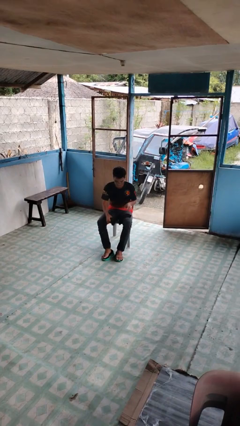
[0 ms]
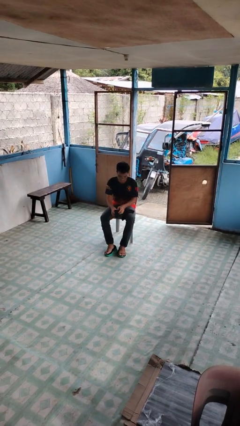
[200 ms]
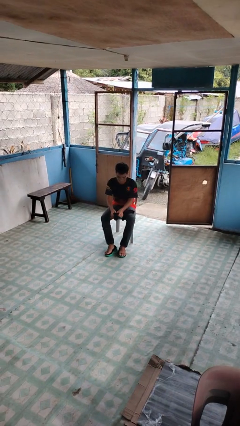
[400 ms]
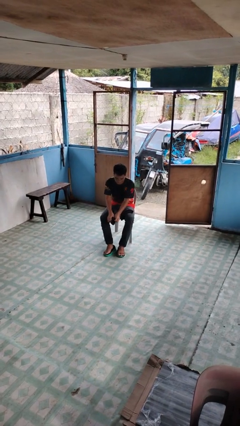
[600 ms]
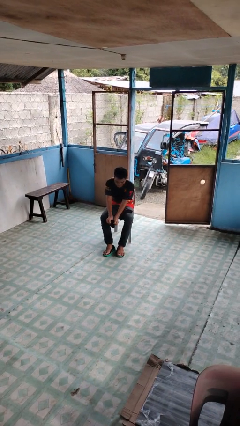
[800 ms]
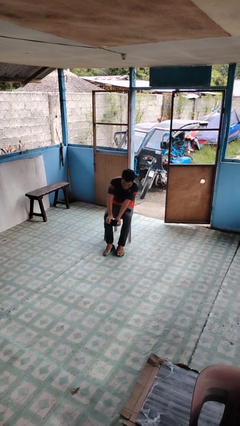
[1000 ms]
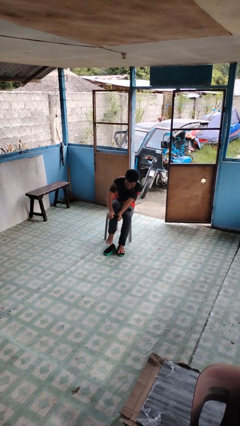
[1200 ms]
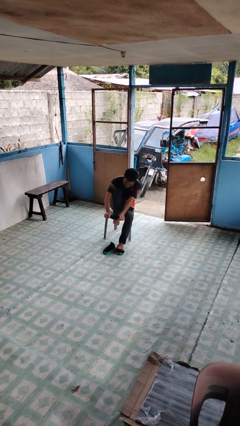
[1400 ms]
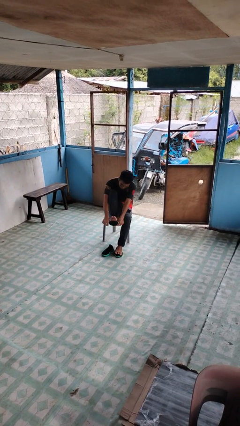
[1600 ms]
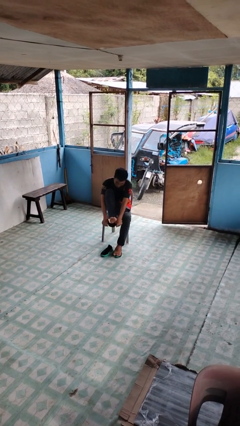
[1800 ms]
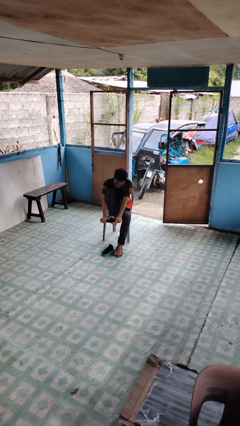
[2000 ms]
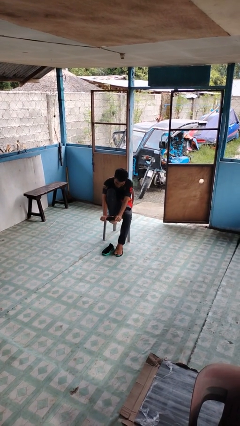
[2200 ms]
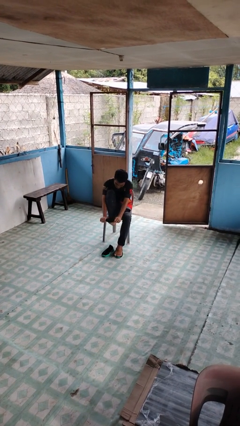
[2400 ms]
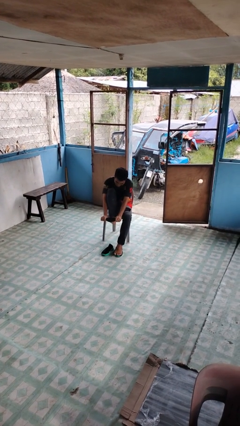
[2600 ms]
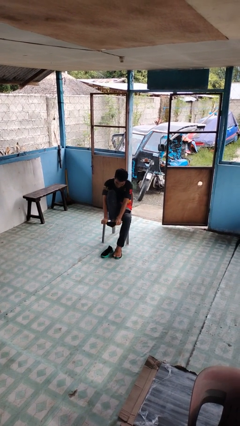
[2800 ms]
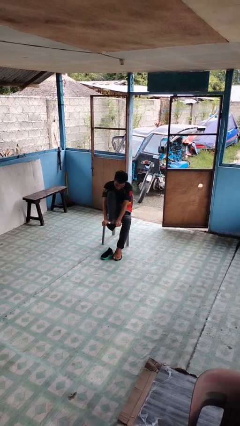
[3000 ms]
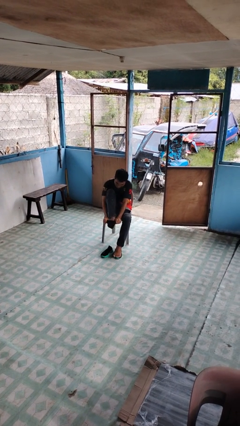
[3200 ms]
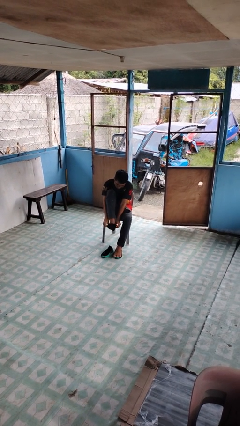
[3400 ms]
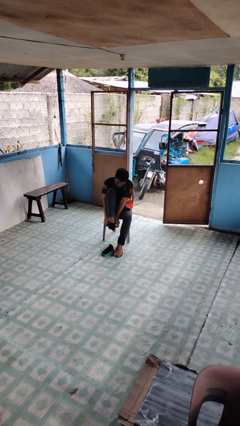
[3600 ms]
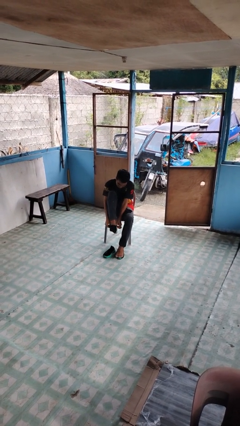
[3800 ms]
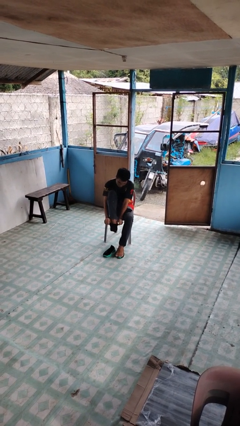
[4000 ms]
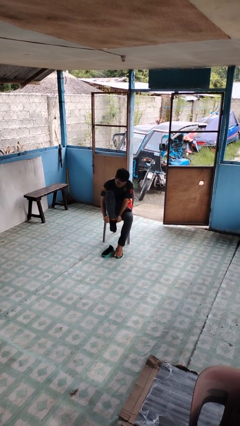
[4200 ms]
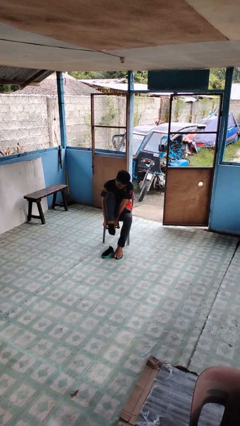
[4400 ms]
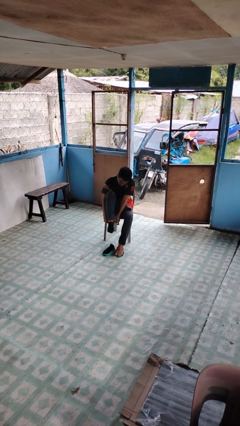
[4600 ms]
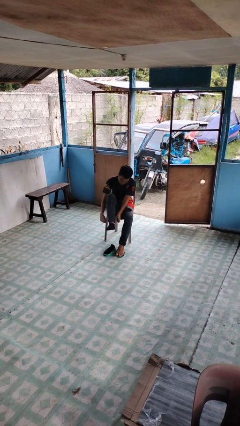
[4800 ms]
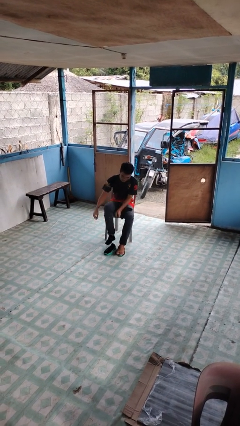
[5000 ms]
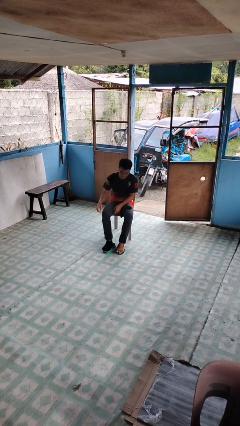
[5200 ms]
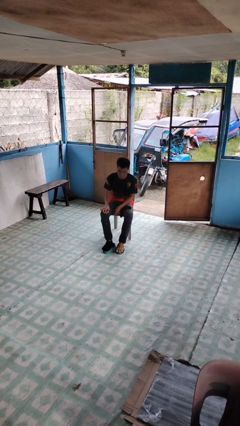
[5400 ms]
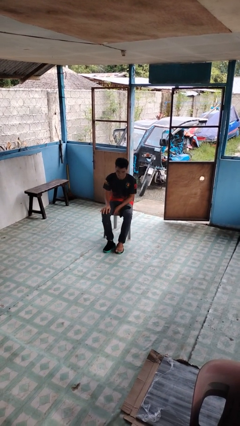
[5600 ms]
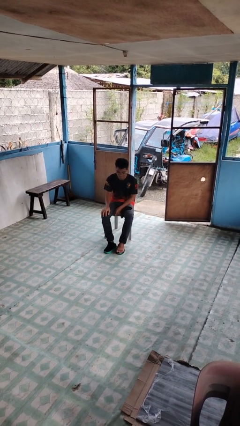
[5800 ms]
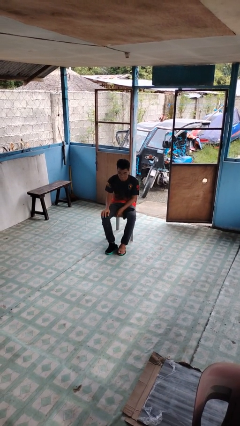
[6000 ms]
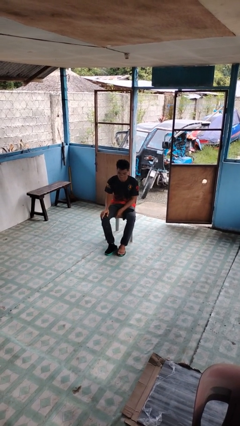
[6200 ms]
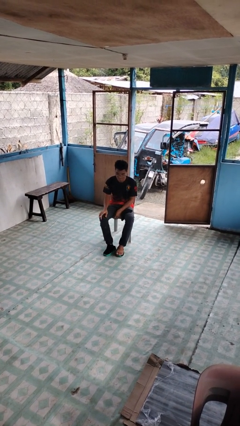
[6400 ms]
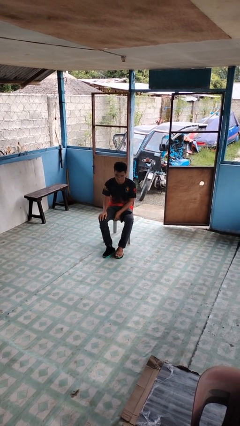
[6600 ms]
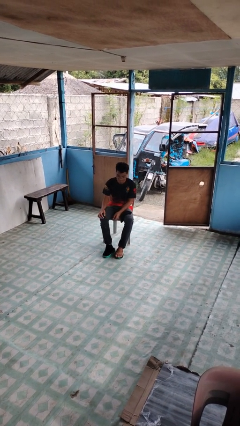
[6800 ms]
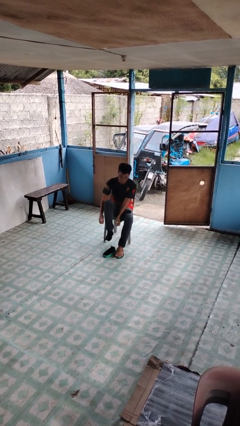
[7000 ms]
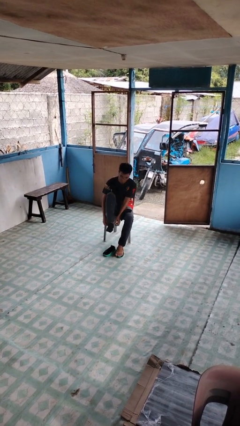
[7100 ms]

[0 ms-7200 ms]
person puts on socks

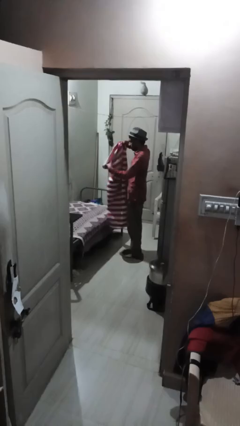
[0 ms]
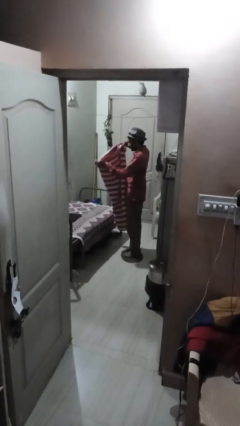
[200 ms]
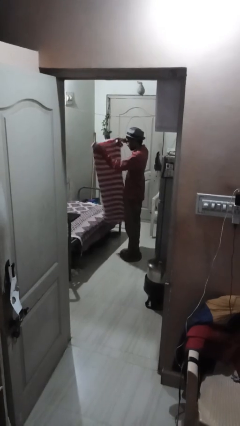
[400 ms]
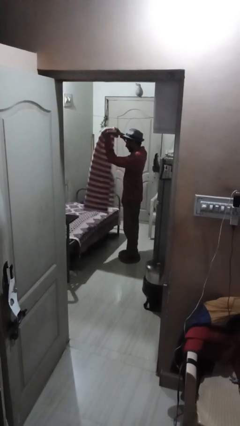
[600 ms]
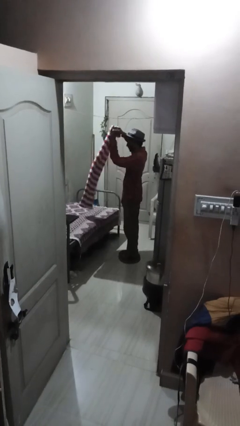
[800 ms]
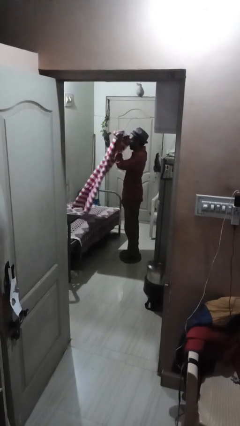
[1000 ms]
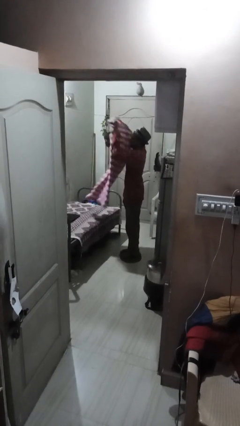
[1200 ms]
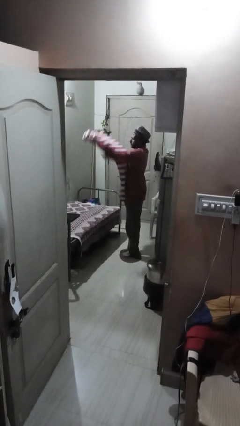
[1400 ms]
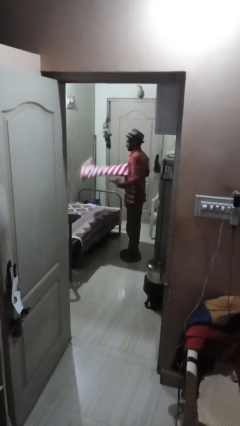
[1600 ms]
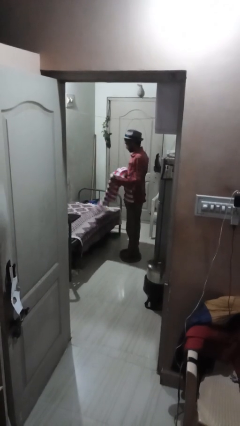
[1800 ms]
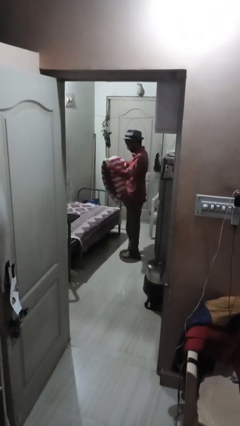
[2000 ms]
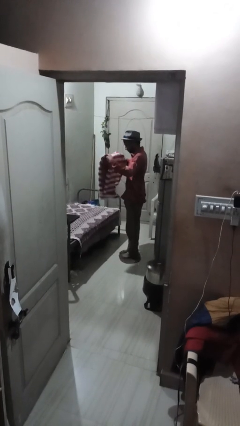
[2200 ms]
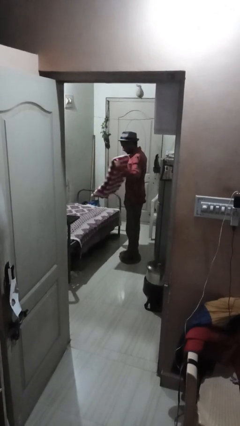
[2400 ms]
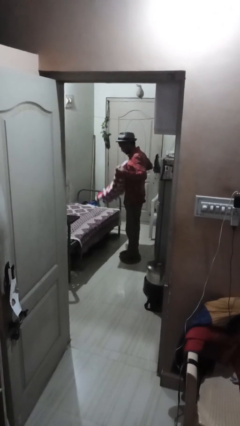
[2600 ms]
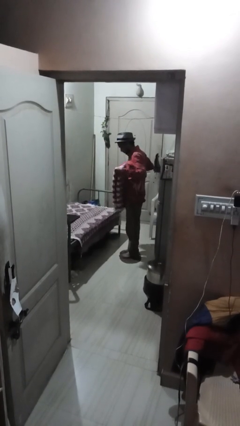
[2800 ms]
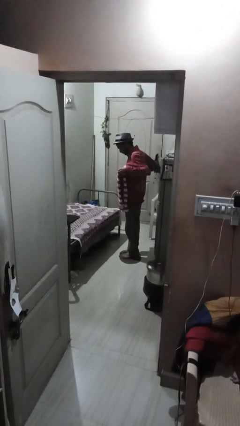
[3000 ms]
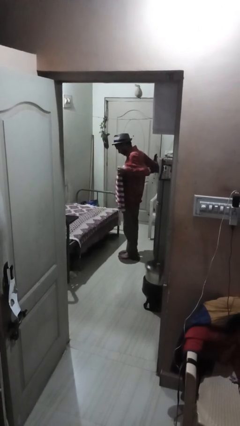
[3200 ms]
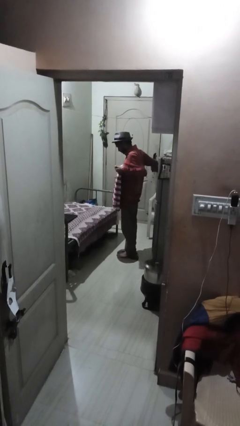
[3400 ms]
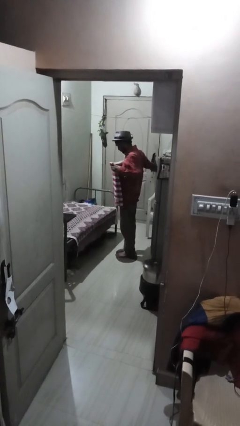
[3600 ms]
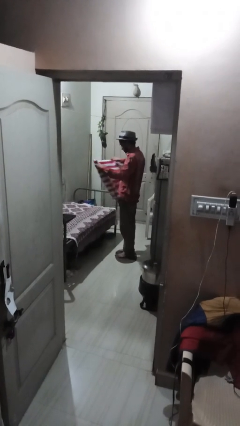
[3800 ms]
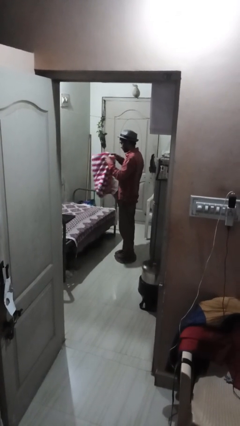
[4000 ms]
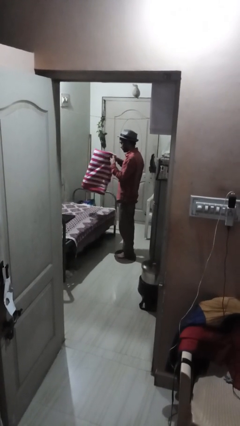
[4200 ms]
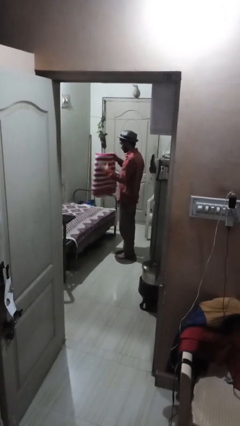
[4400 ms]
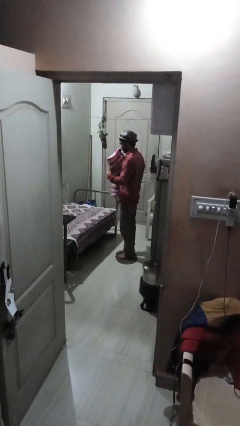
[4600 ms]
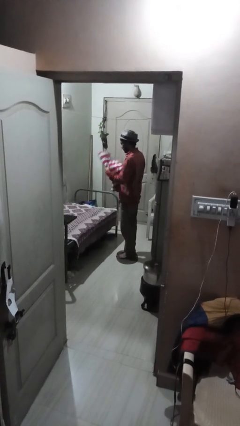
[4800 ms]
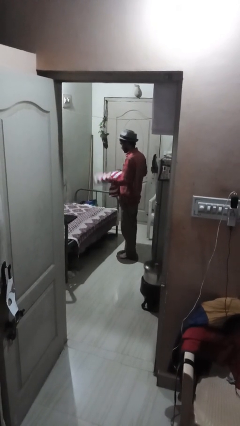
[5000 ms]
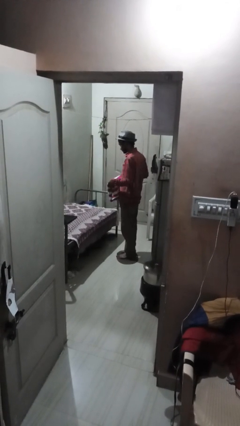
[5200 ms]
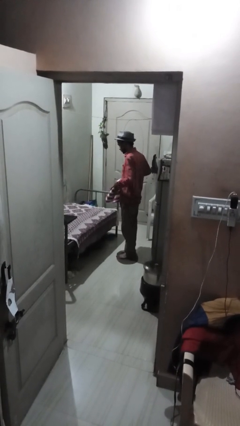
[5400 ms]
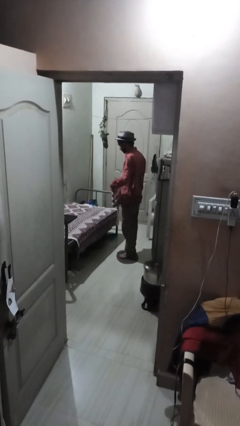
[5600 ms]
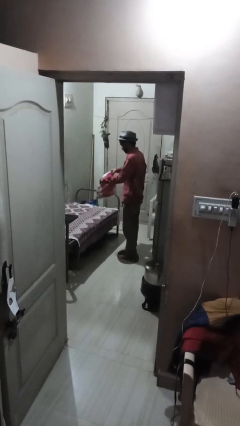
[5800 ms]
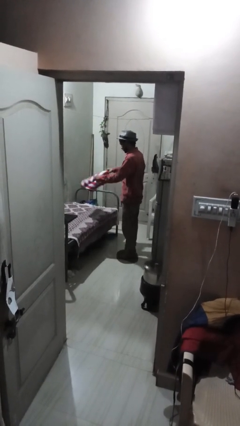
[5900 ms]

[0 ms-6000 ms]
person folds blanket

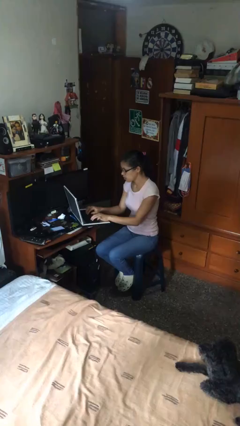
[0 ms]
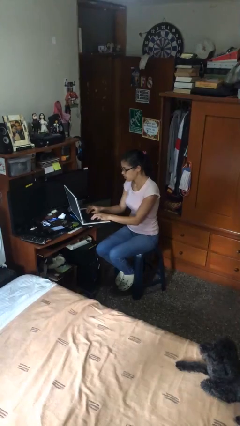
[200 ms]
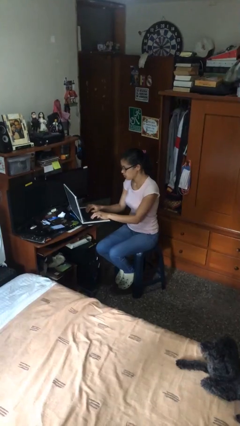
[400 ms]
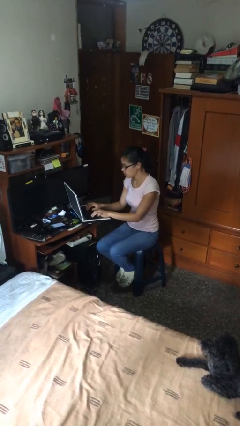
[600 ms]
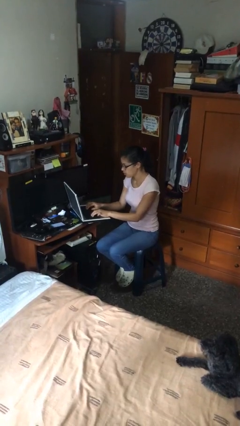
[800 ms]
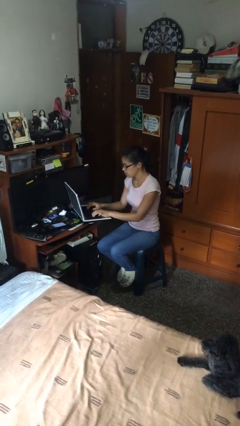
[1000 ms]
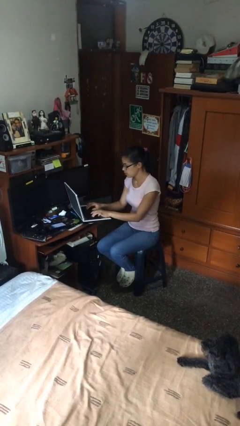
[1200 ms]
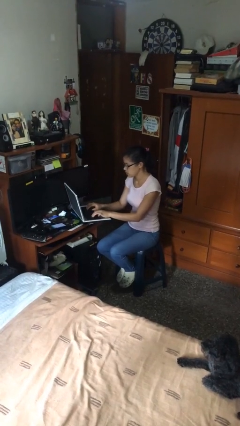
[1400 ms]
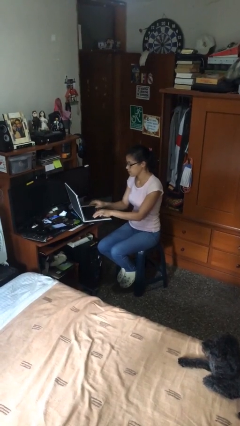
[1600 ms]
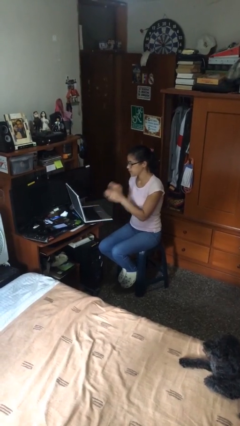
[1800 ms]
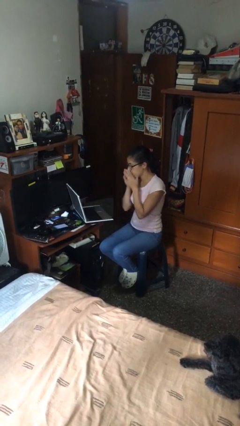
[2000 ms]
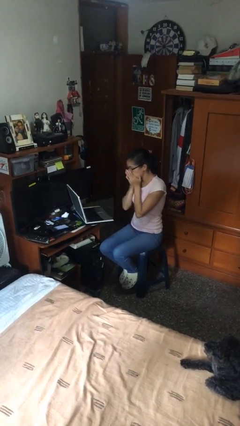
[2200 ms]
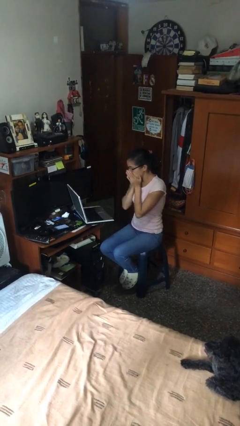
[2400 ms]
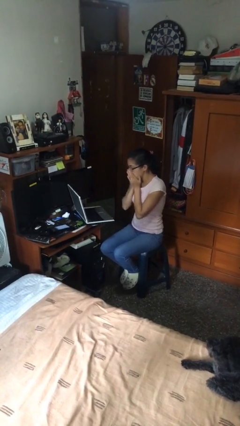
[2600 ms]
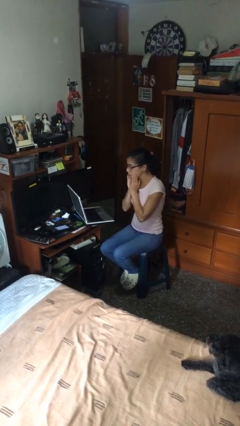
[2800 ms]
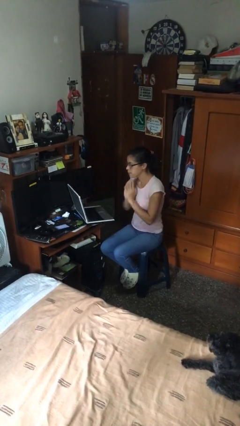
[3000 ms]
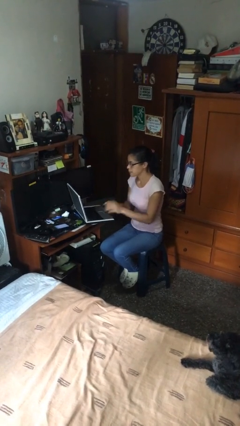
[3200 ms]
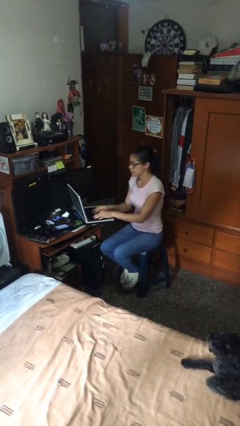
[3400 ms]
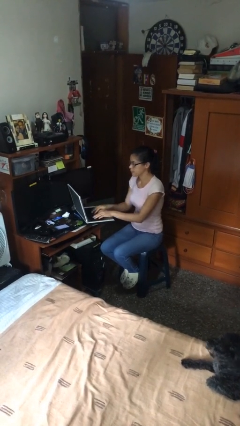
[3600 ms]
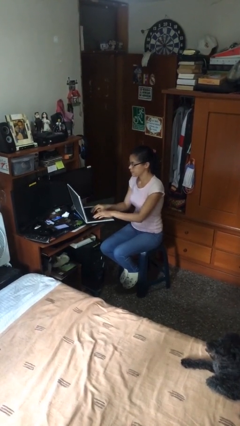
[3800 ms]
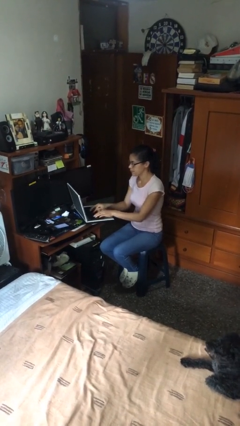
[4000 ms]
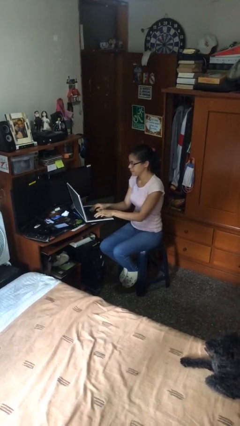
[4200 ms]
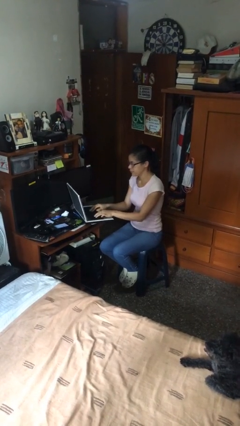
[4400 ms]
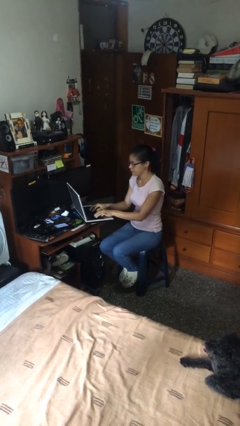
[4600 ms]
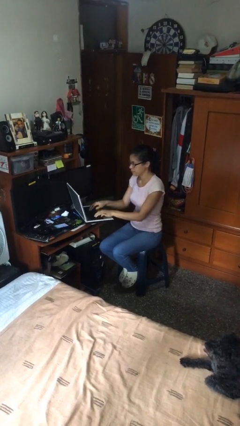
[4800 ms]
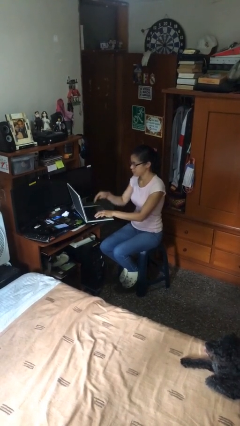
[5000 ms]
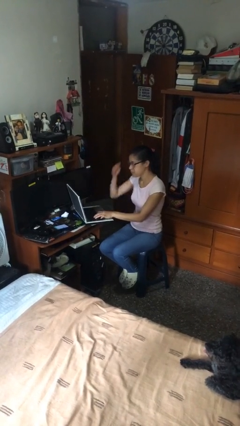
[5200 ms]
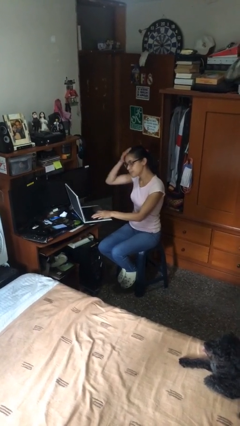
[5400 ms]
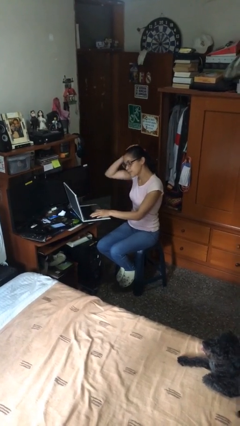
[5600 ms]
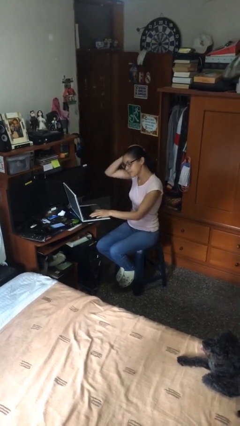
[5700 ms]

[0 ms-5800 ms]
person interacts with laptop
